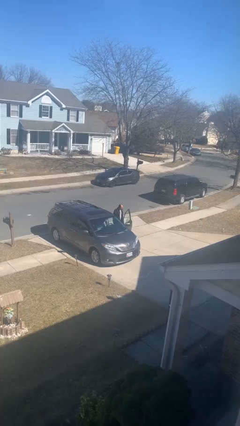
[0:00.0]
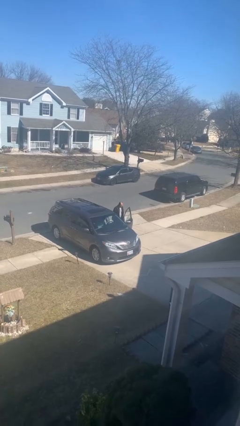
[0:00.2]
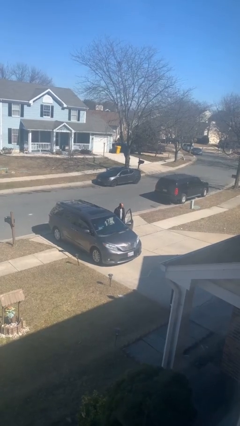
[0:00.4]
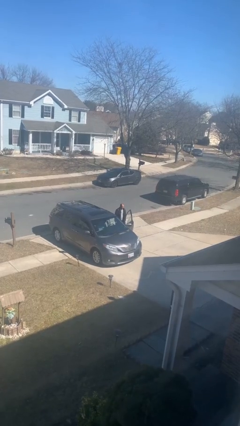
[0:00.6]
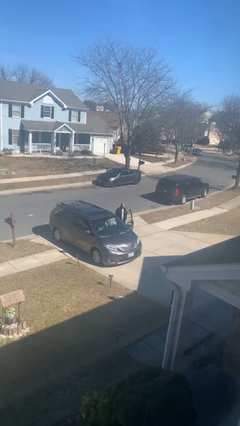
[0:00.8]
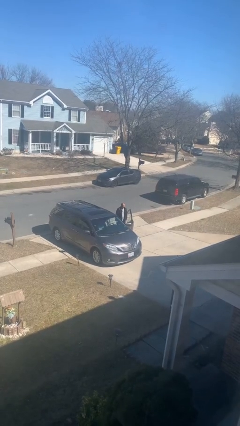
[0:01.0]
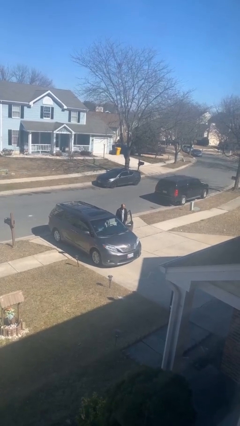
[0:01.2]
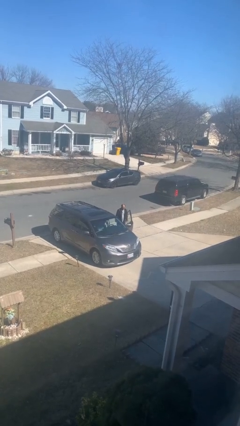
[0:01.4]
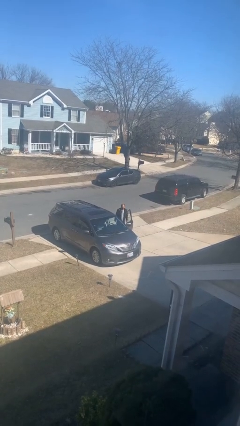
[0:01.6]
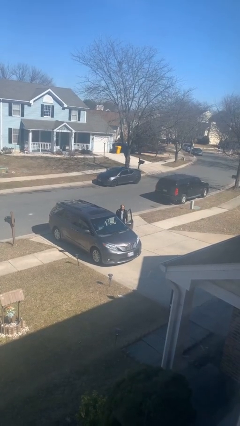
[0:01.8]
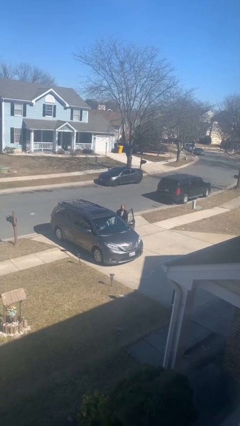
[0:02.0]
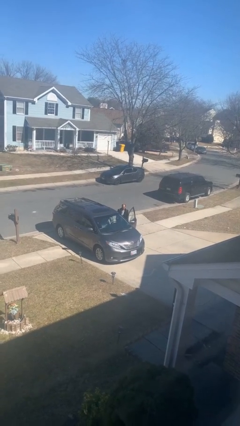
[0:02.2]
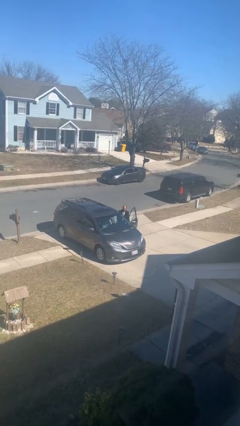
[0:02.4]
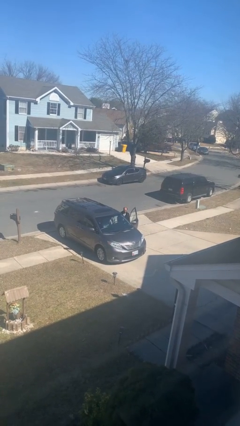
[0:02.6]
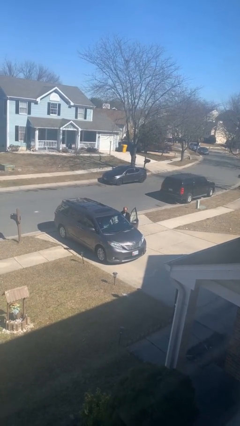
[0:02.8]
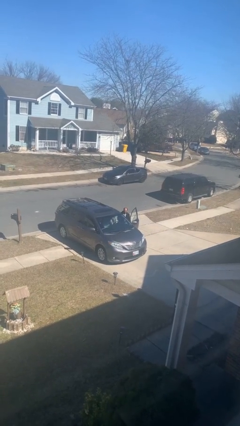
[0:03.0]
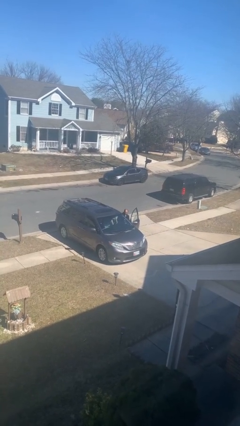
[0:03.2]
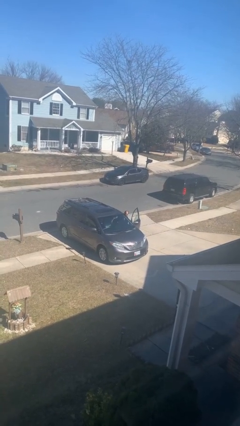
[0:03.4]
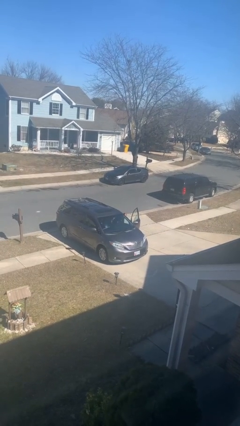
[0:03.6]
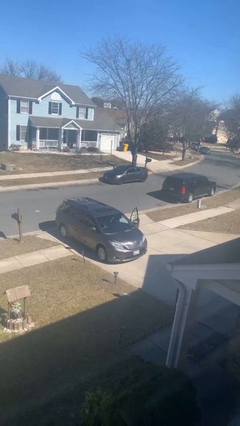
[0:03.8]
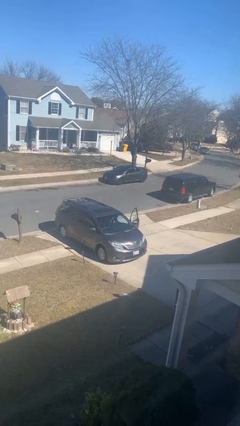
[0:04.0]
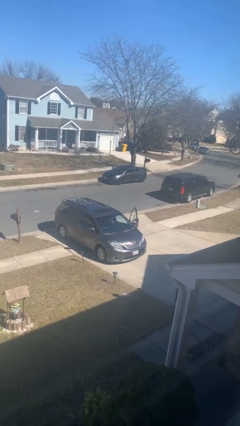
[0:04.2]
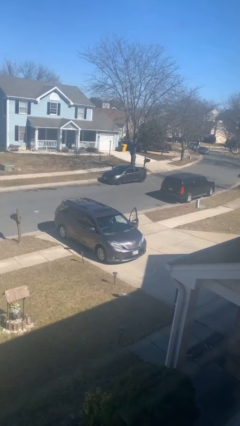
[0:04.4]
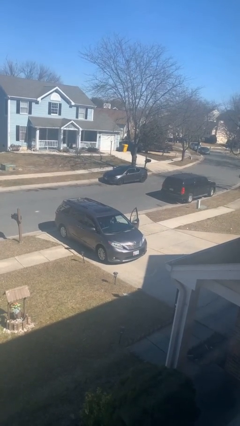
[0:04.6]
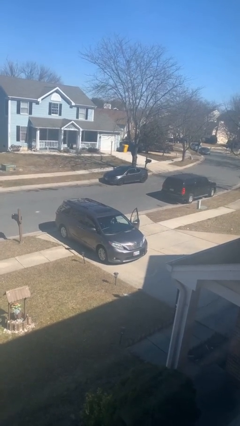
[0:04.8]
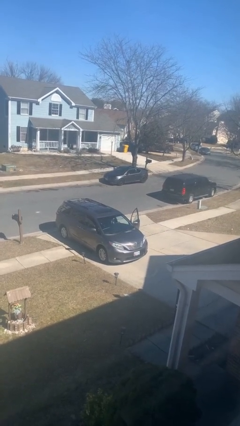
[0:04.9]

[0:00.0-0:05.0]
person enters car

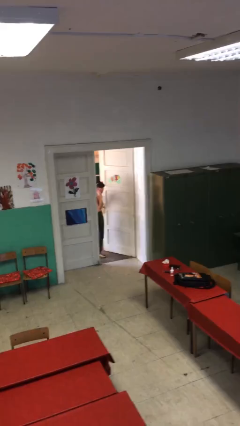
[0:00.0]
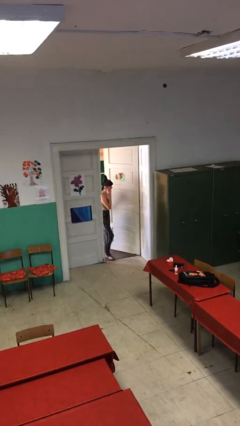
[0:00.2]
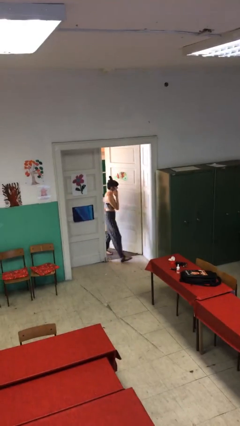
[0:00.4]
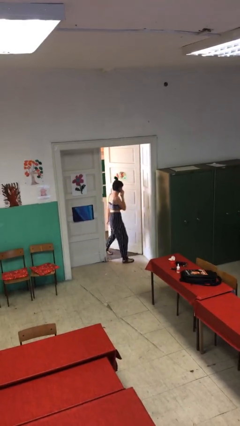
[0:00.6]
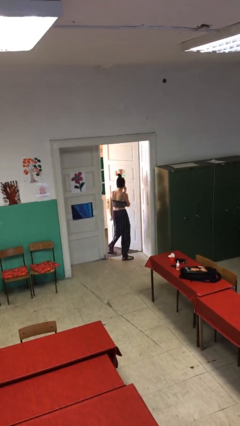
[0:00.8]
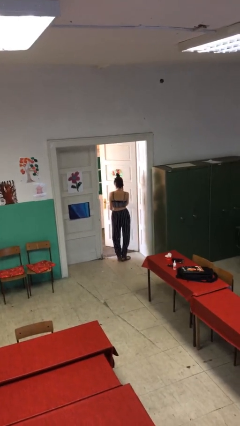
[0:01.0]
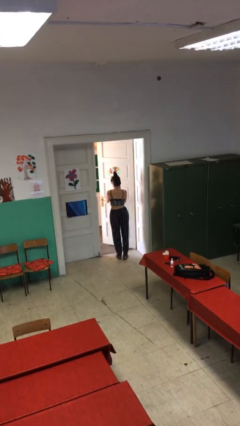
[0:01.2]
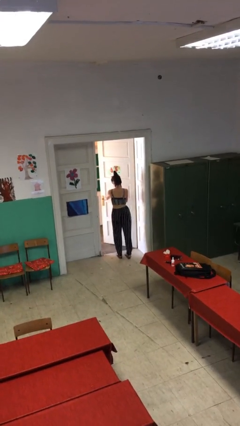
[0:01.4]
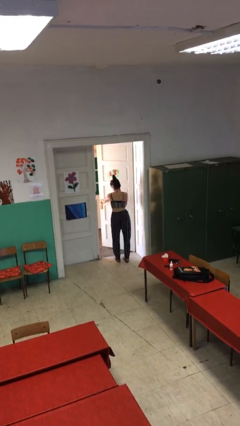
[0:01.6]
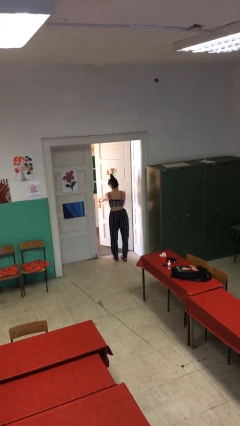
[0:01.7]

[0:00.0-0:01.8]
person enters scene through structure

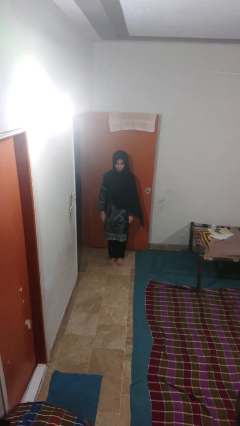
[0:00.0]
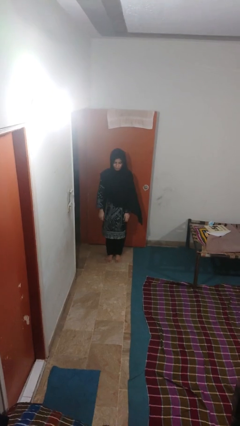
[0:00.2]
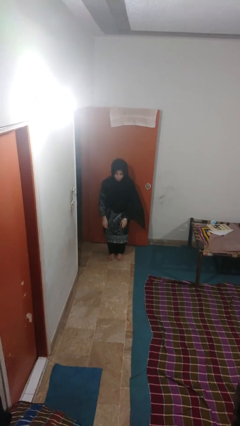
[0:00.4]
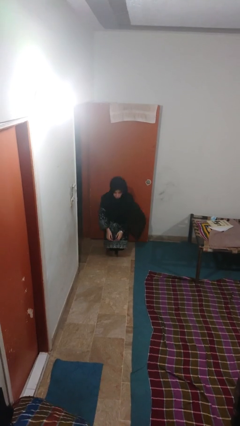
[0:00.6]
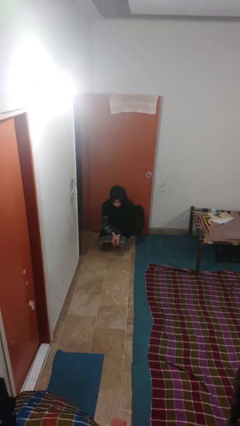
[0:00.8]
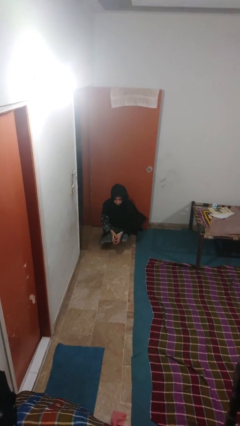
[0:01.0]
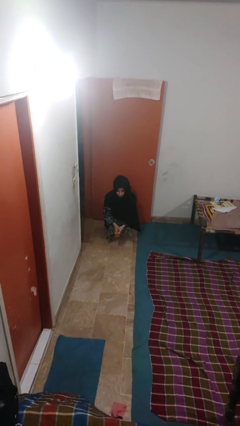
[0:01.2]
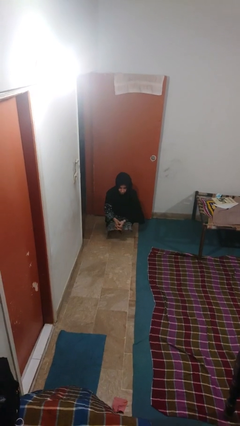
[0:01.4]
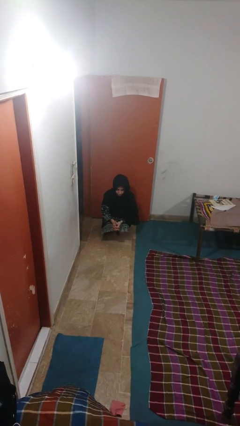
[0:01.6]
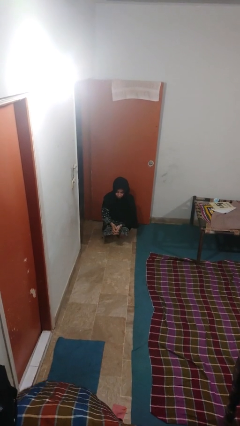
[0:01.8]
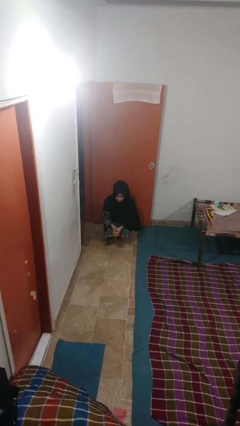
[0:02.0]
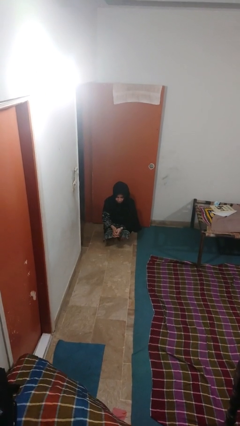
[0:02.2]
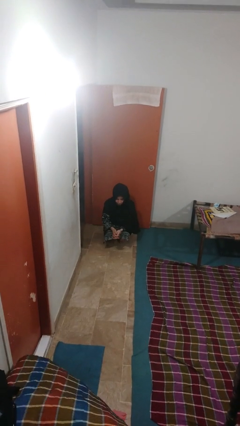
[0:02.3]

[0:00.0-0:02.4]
person squats

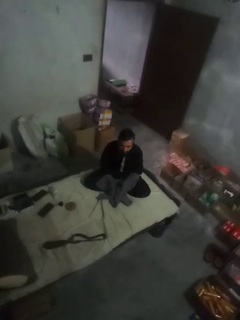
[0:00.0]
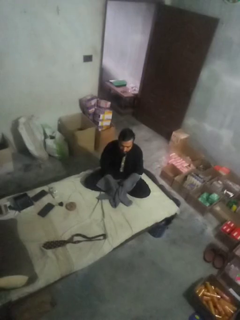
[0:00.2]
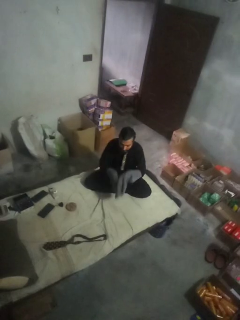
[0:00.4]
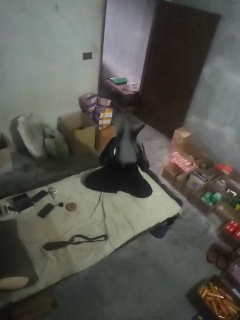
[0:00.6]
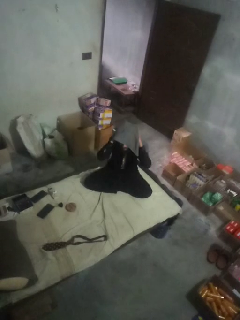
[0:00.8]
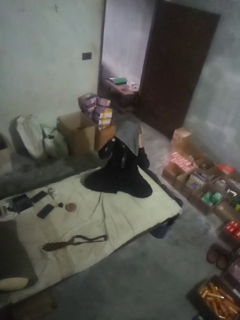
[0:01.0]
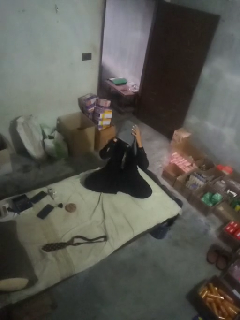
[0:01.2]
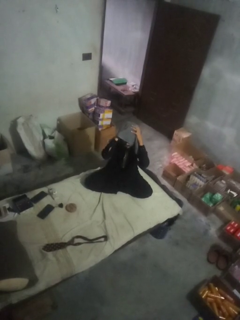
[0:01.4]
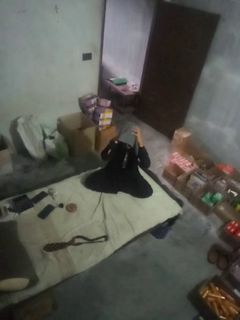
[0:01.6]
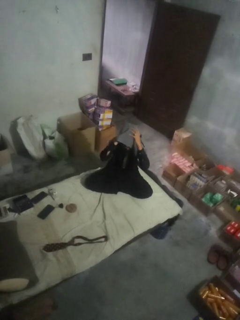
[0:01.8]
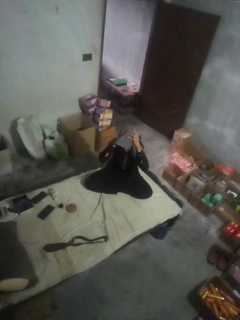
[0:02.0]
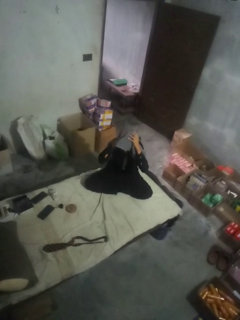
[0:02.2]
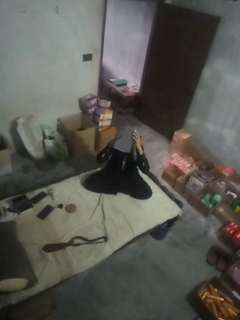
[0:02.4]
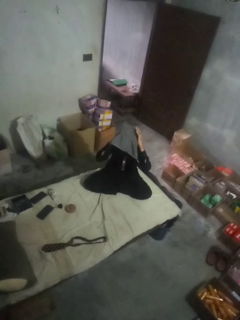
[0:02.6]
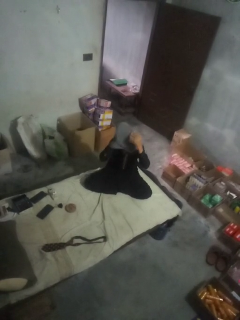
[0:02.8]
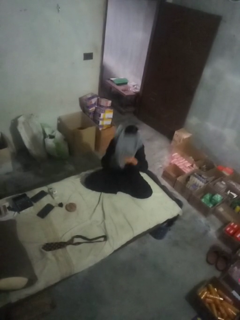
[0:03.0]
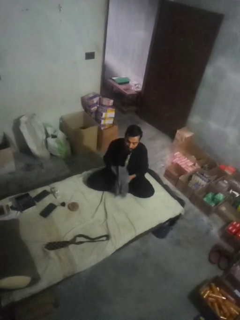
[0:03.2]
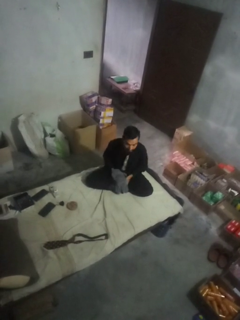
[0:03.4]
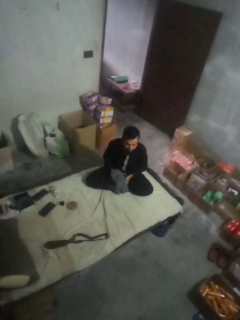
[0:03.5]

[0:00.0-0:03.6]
person dries hair with towel

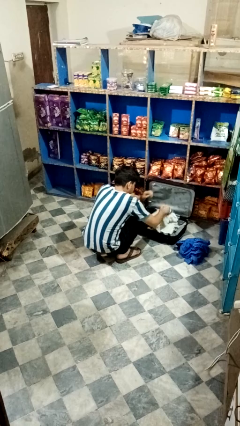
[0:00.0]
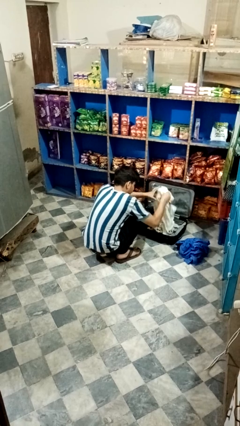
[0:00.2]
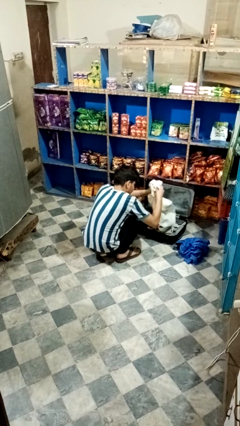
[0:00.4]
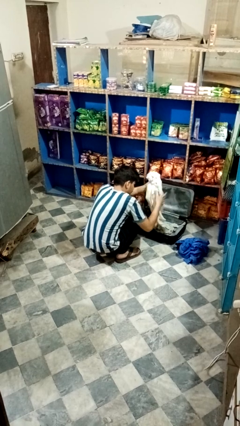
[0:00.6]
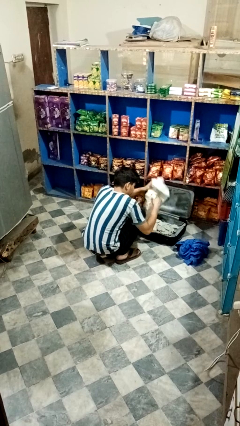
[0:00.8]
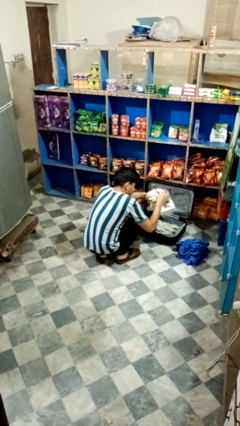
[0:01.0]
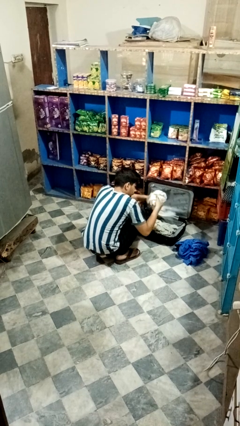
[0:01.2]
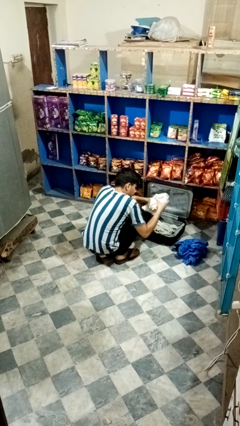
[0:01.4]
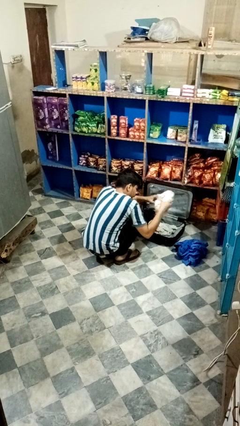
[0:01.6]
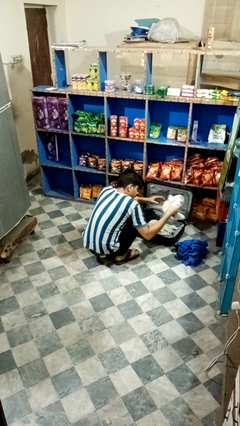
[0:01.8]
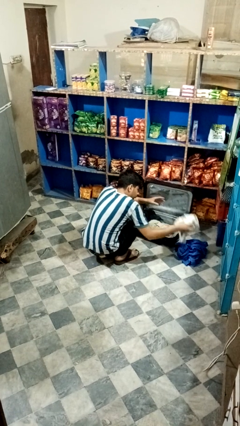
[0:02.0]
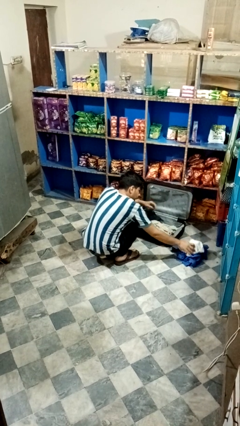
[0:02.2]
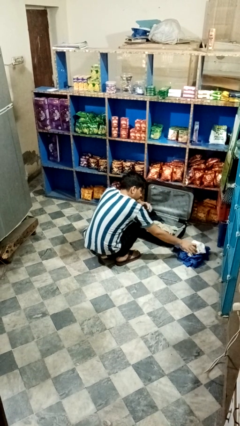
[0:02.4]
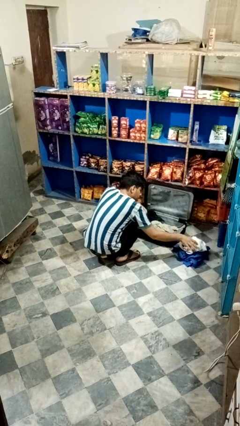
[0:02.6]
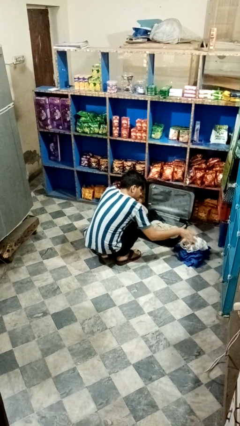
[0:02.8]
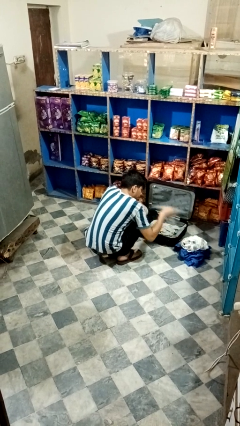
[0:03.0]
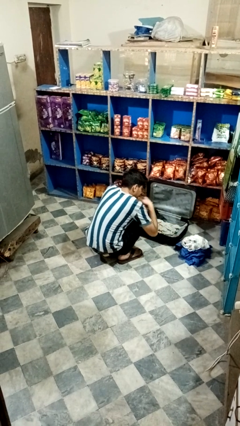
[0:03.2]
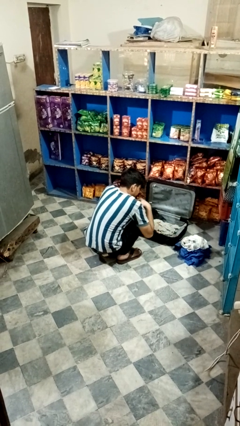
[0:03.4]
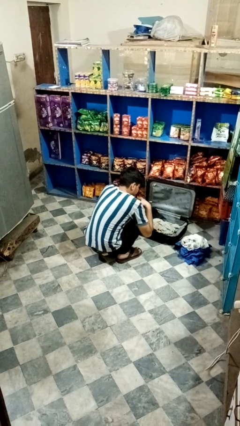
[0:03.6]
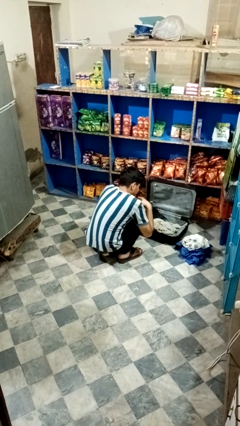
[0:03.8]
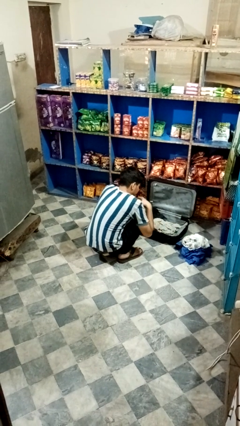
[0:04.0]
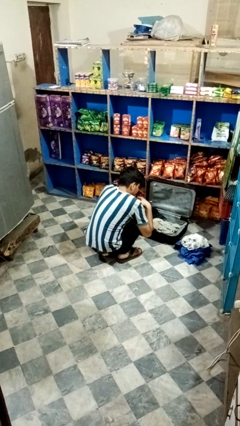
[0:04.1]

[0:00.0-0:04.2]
person unloads clothes from suitcase

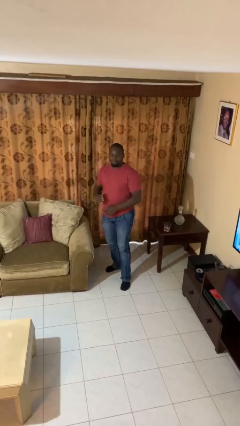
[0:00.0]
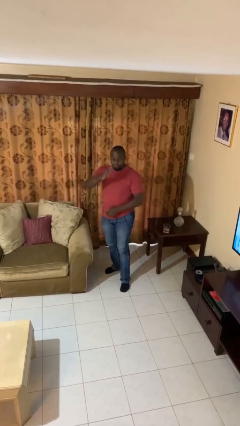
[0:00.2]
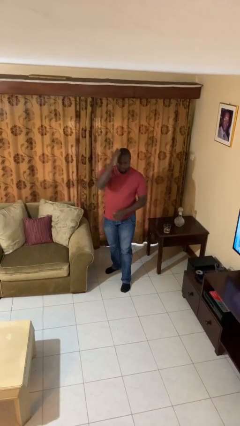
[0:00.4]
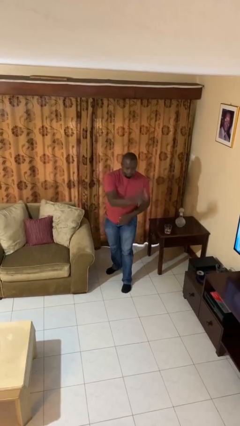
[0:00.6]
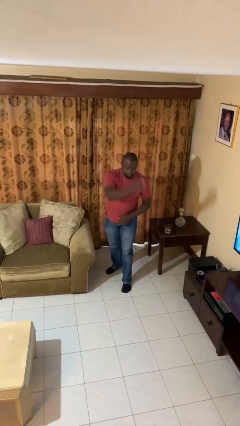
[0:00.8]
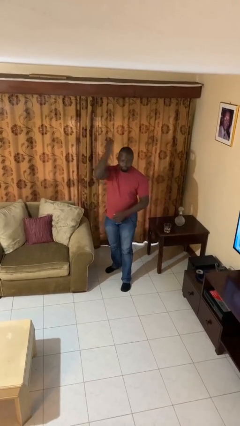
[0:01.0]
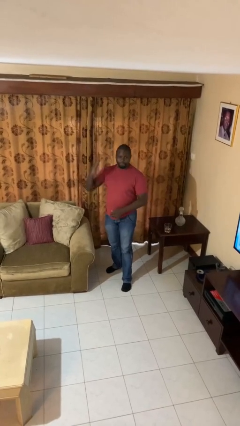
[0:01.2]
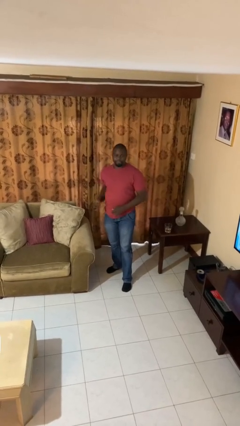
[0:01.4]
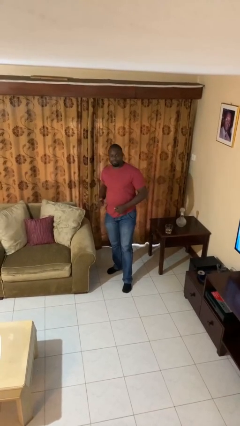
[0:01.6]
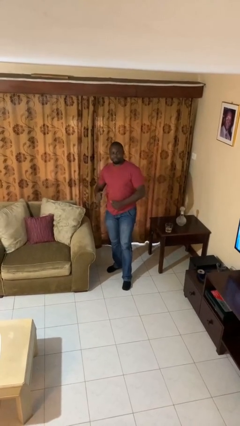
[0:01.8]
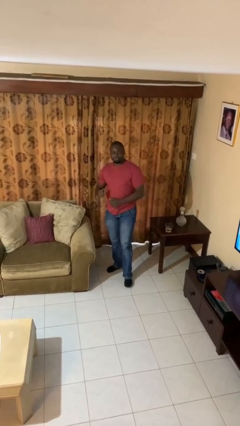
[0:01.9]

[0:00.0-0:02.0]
person karate chop
